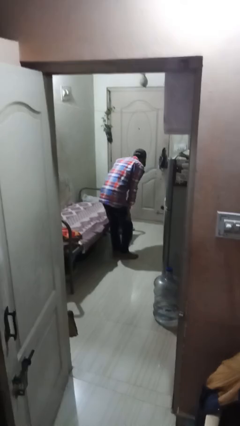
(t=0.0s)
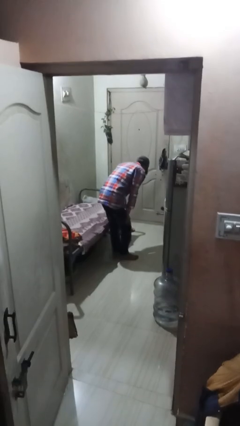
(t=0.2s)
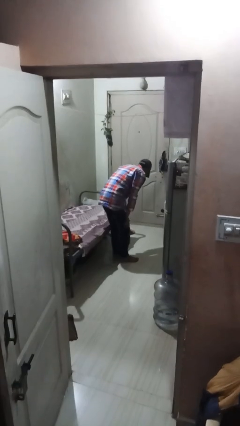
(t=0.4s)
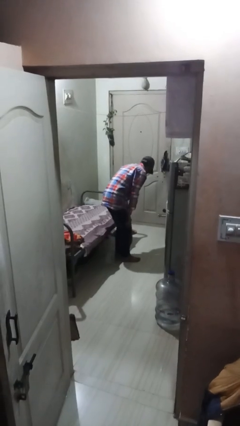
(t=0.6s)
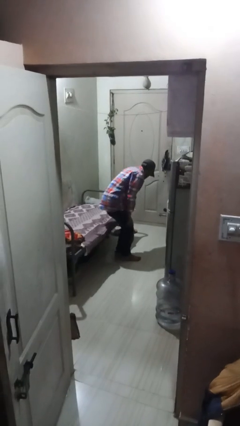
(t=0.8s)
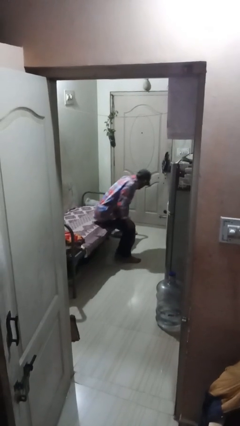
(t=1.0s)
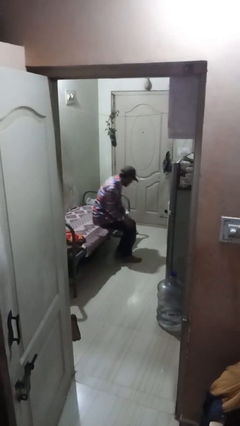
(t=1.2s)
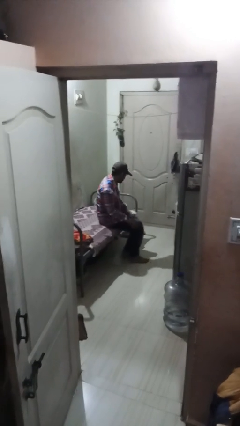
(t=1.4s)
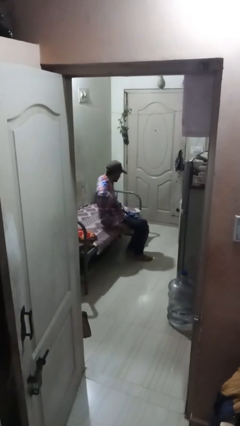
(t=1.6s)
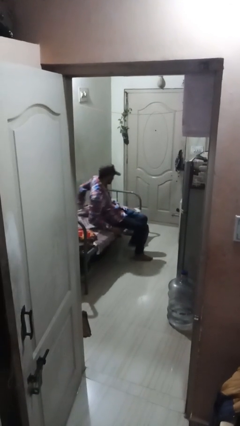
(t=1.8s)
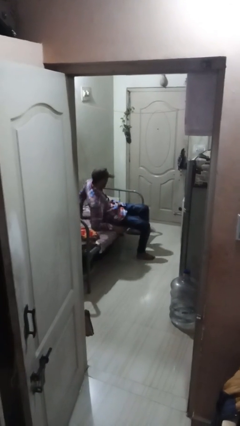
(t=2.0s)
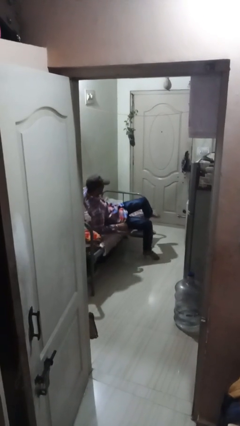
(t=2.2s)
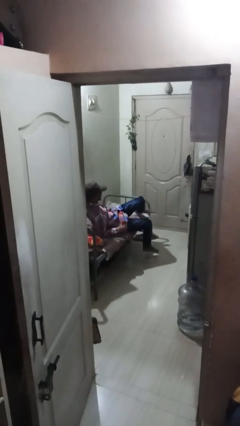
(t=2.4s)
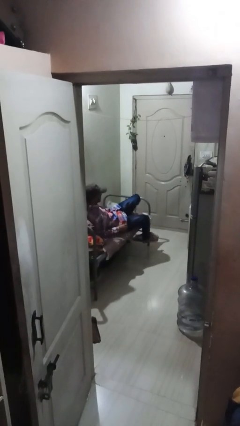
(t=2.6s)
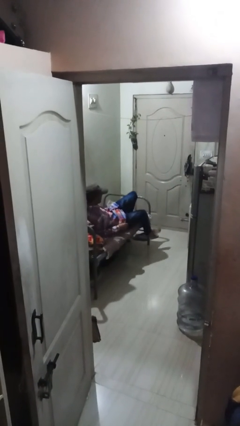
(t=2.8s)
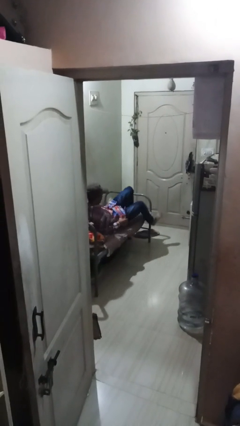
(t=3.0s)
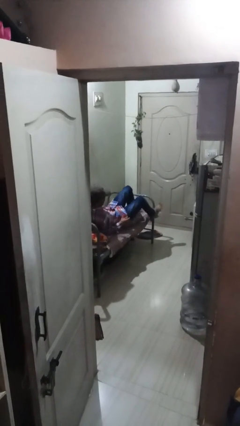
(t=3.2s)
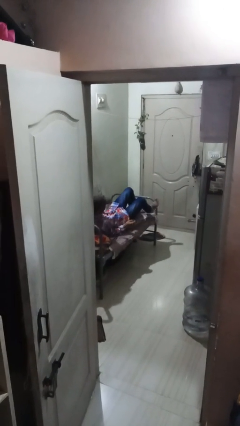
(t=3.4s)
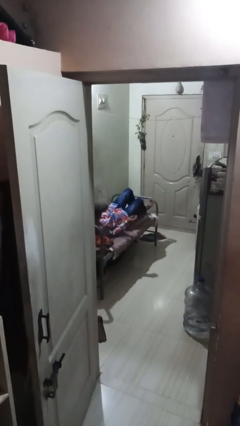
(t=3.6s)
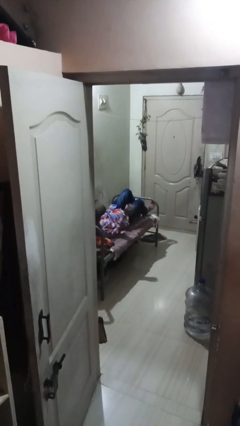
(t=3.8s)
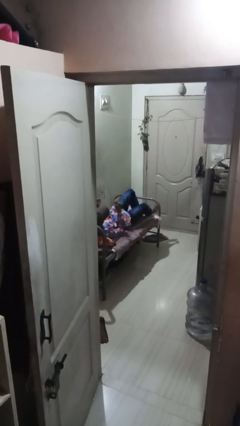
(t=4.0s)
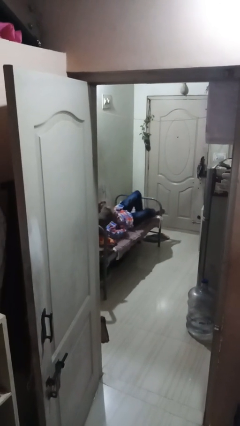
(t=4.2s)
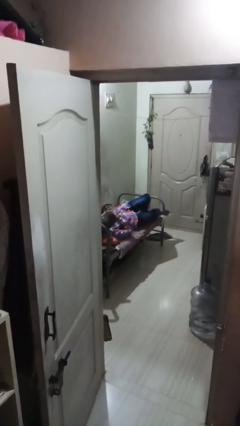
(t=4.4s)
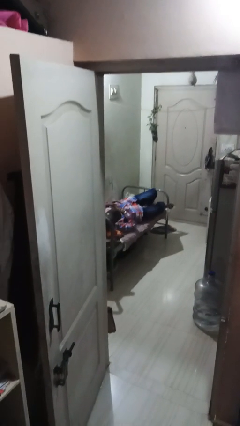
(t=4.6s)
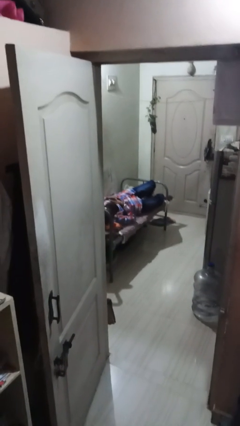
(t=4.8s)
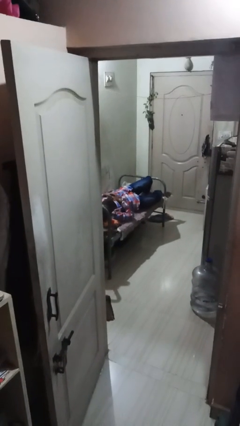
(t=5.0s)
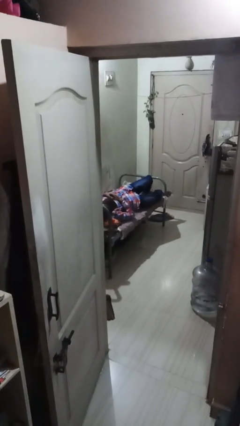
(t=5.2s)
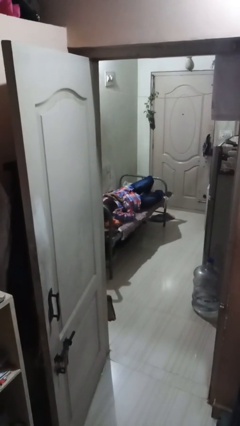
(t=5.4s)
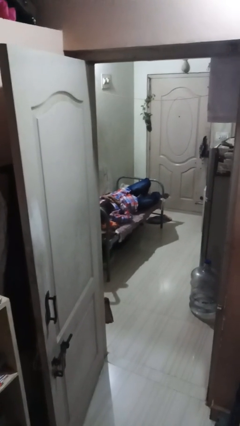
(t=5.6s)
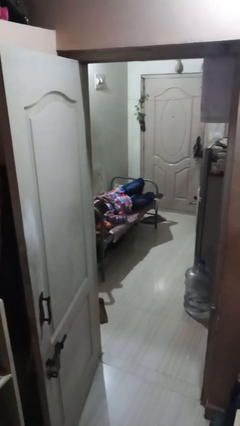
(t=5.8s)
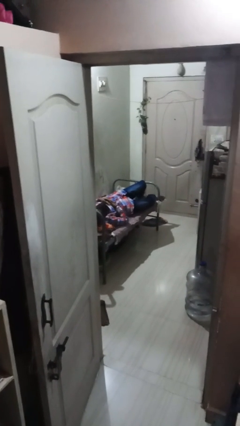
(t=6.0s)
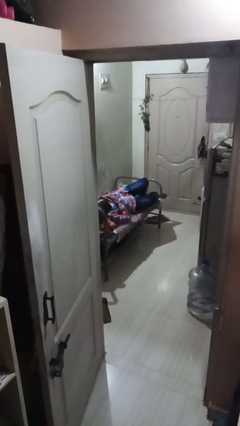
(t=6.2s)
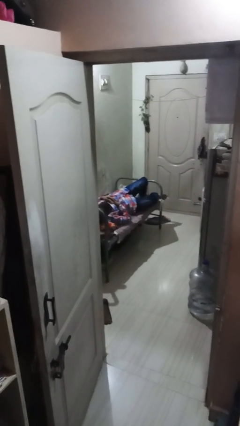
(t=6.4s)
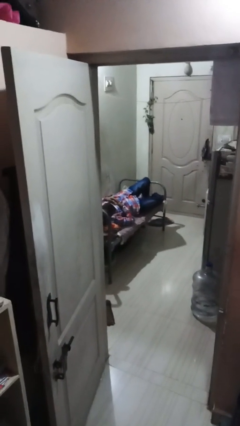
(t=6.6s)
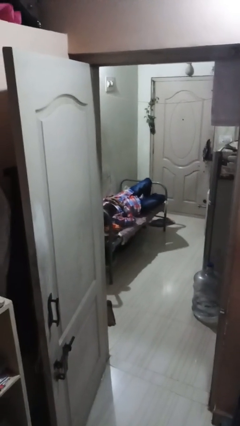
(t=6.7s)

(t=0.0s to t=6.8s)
person lies down on bed

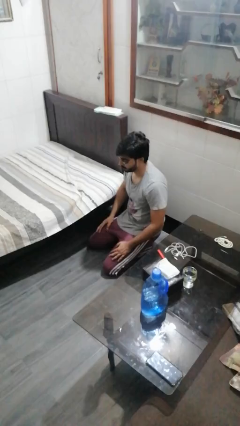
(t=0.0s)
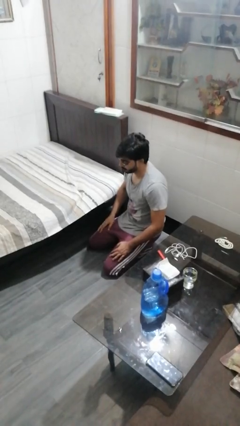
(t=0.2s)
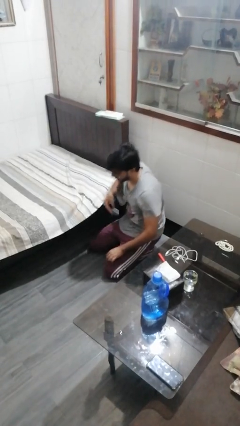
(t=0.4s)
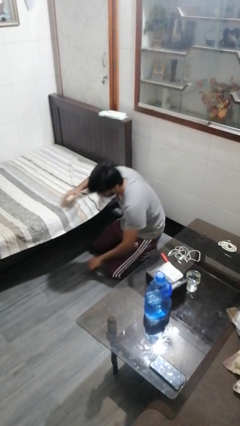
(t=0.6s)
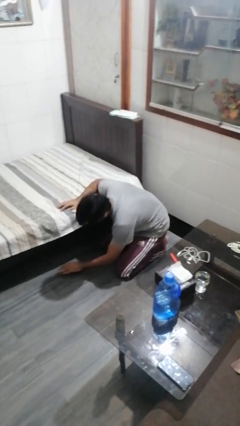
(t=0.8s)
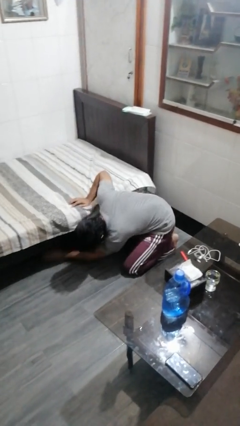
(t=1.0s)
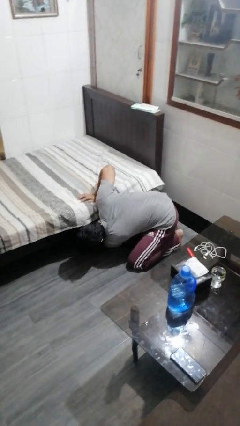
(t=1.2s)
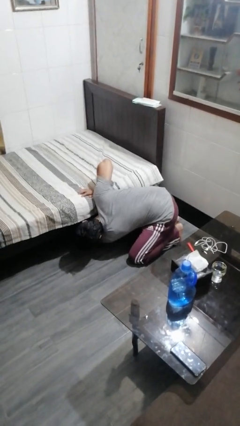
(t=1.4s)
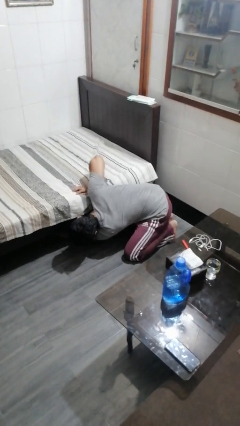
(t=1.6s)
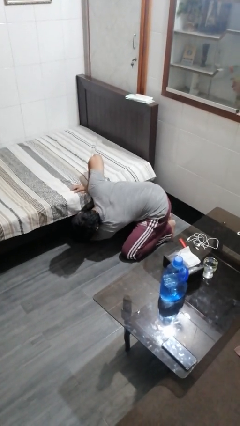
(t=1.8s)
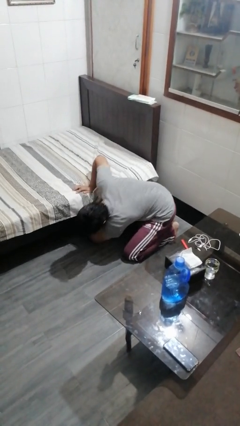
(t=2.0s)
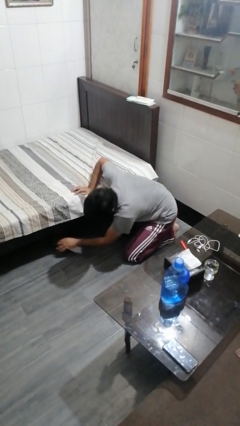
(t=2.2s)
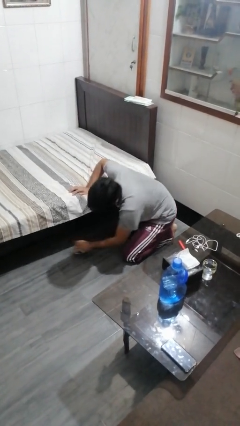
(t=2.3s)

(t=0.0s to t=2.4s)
person searches under bed

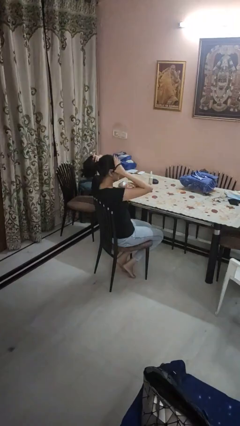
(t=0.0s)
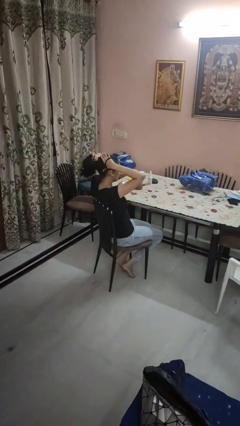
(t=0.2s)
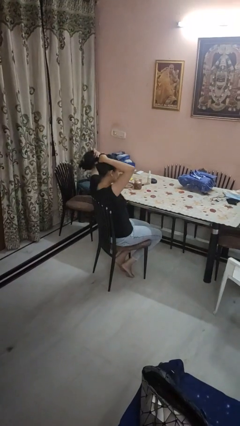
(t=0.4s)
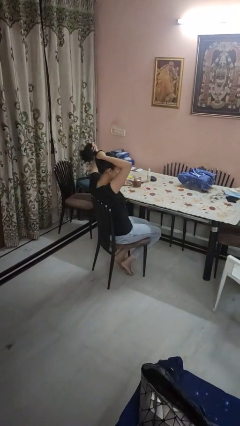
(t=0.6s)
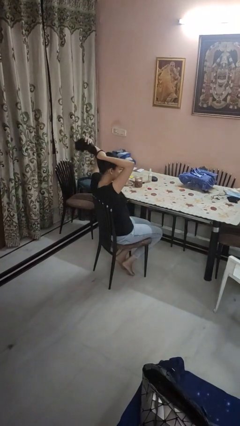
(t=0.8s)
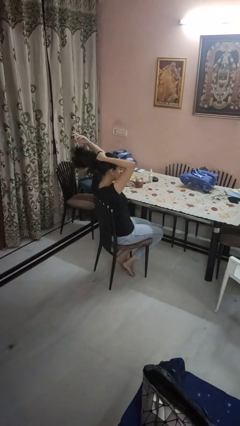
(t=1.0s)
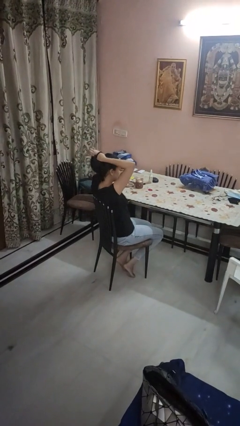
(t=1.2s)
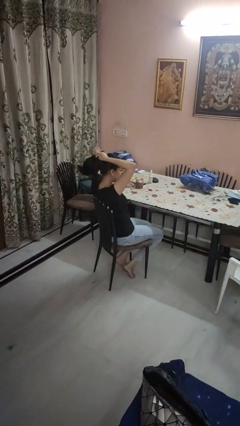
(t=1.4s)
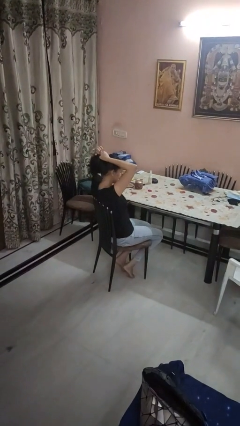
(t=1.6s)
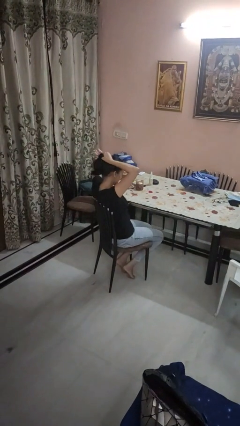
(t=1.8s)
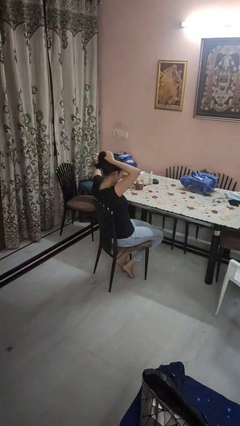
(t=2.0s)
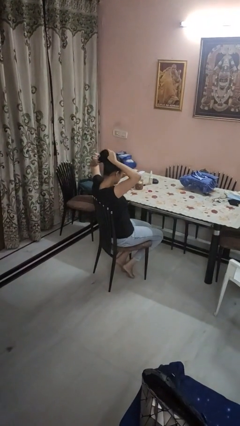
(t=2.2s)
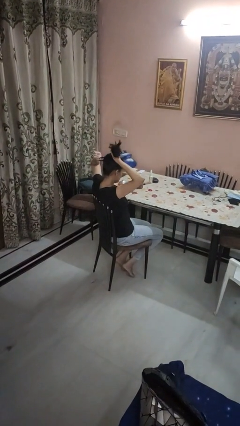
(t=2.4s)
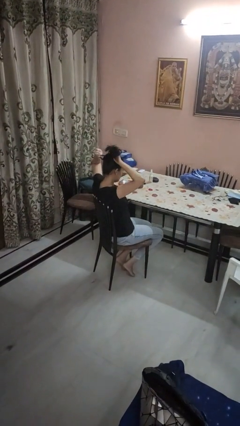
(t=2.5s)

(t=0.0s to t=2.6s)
person puts hair in ponytail

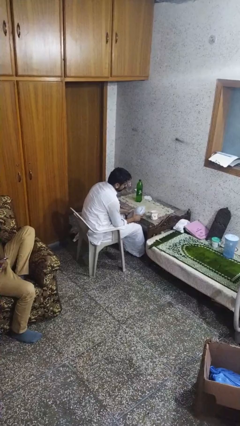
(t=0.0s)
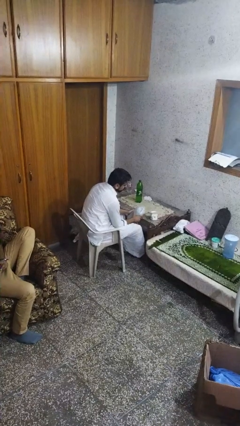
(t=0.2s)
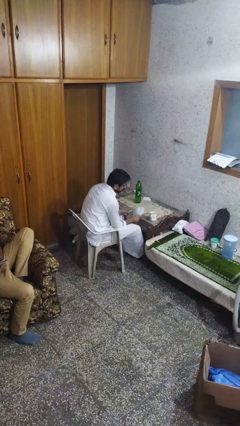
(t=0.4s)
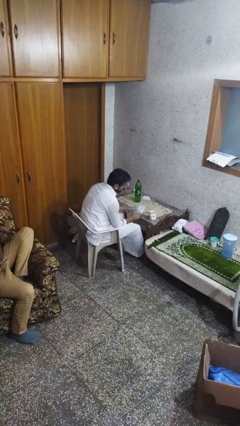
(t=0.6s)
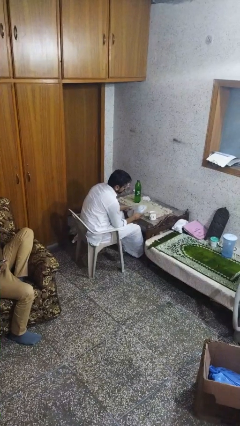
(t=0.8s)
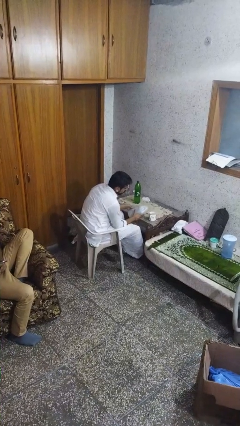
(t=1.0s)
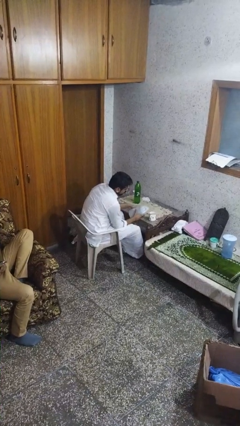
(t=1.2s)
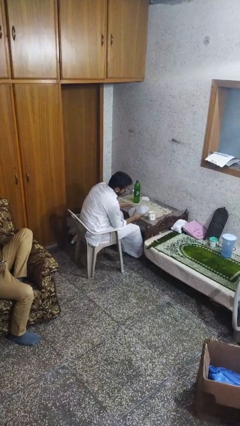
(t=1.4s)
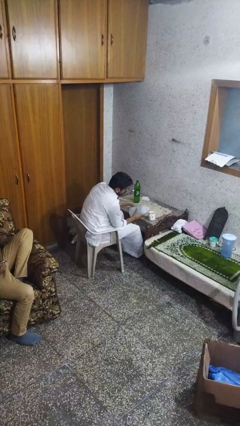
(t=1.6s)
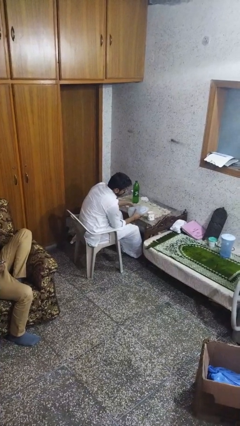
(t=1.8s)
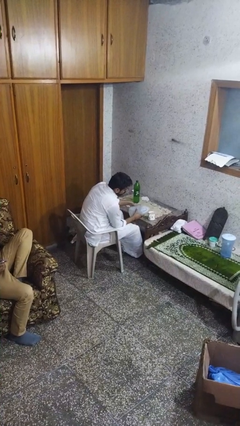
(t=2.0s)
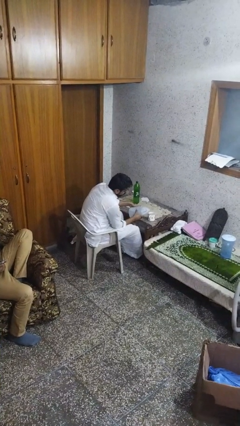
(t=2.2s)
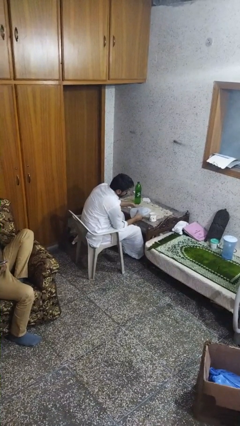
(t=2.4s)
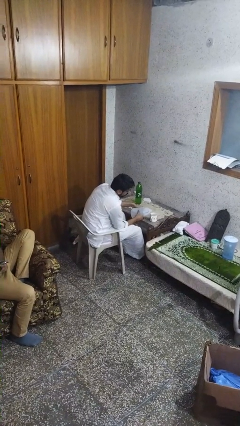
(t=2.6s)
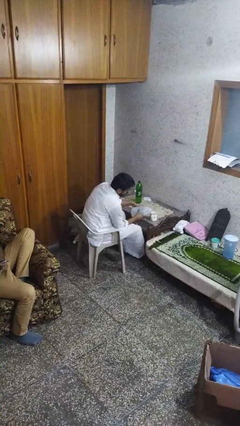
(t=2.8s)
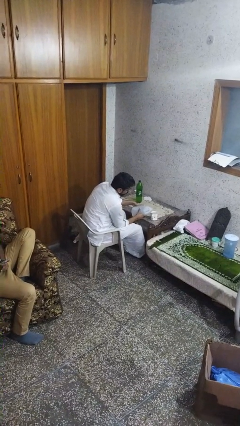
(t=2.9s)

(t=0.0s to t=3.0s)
person pours liquid into cup

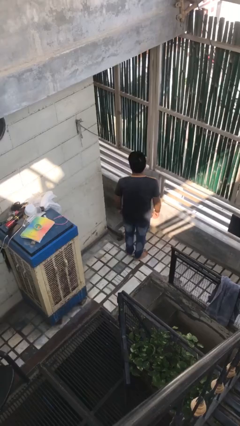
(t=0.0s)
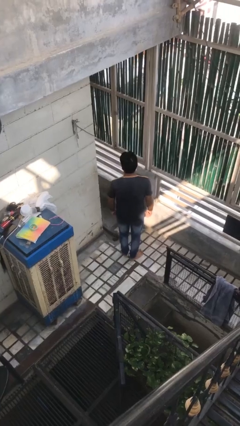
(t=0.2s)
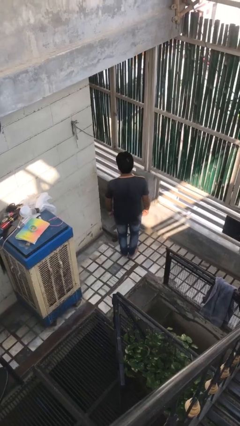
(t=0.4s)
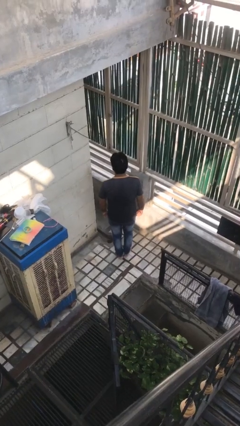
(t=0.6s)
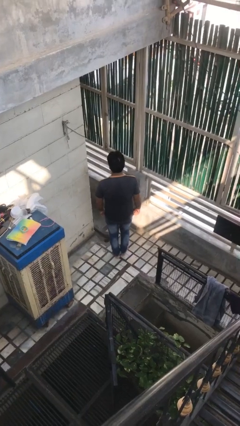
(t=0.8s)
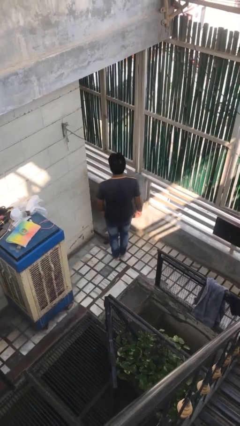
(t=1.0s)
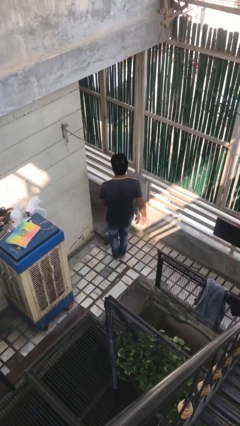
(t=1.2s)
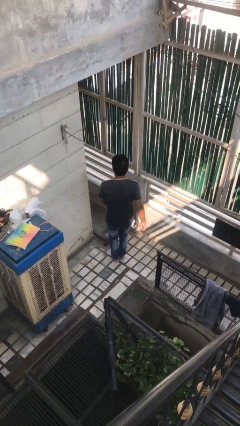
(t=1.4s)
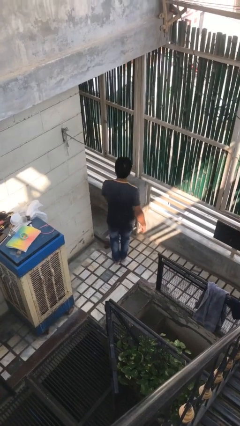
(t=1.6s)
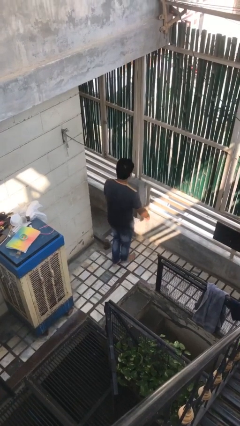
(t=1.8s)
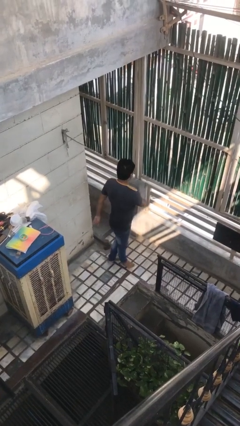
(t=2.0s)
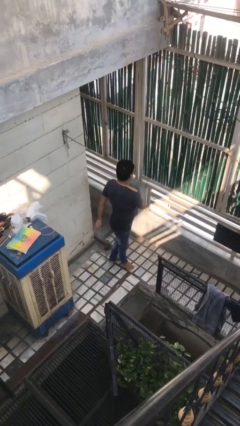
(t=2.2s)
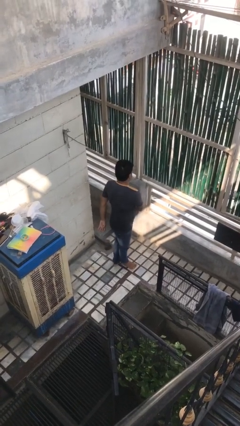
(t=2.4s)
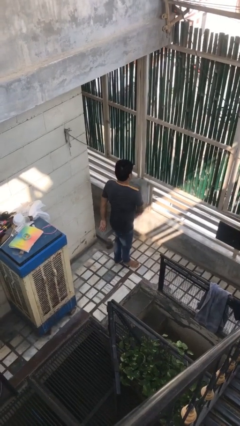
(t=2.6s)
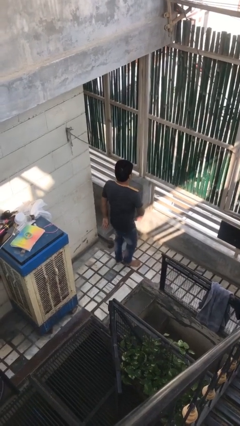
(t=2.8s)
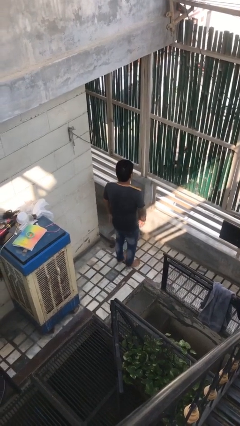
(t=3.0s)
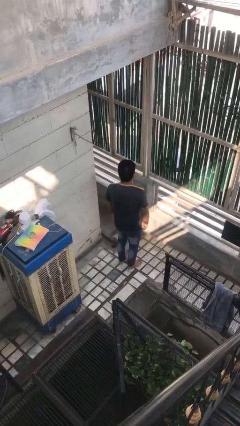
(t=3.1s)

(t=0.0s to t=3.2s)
person twirls
